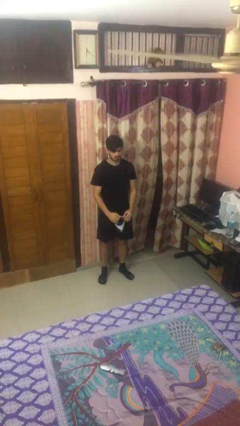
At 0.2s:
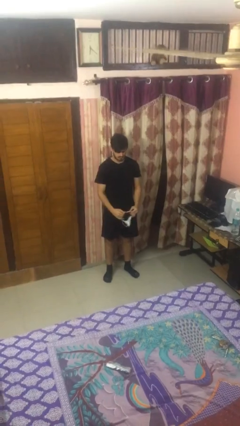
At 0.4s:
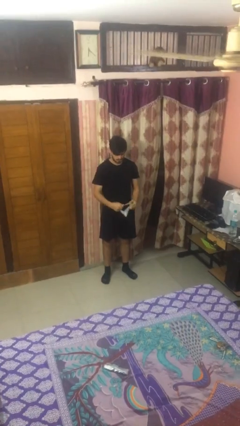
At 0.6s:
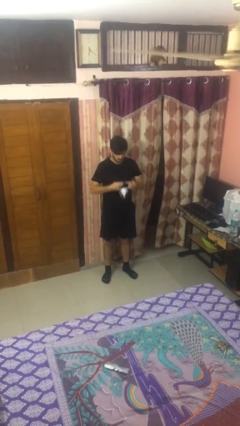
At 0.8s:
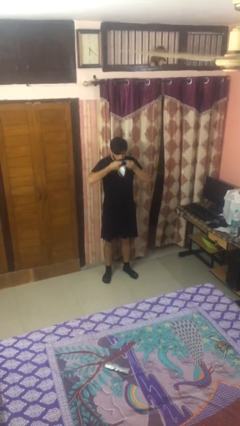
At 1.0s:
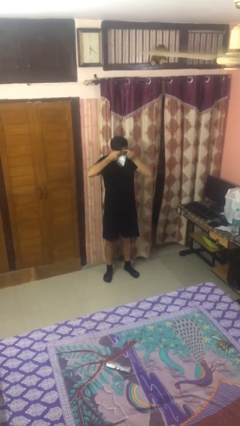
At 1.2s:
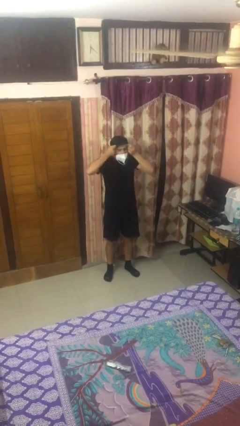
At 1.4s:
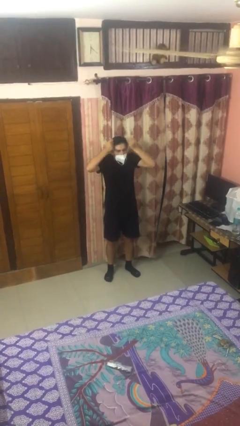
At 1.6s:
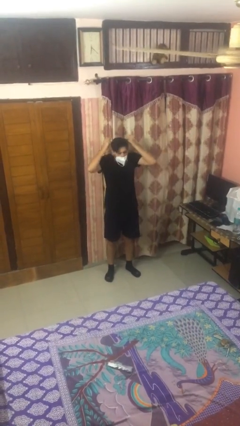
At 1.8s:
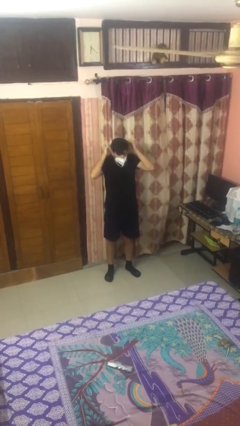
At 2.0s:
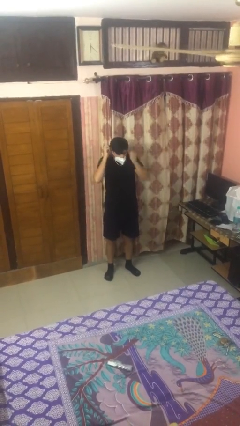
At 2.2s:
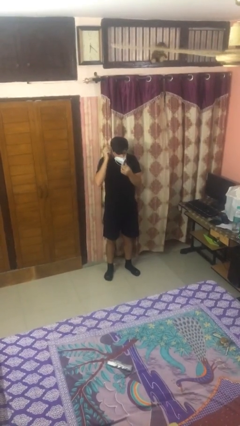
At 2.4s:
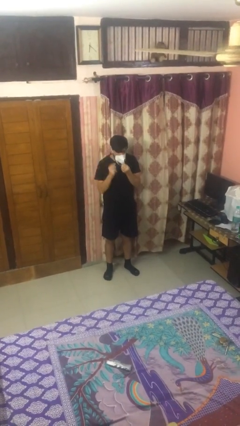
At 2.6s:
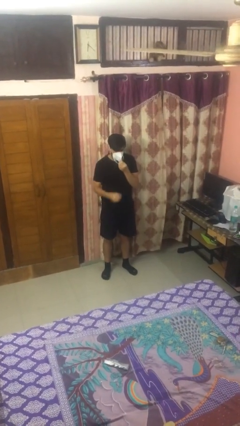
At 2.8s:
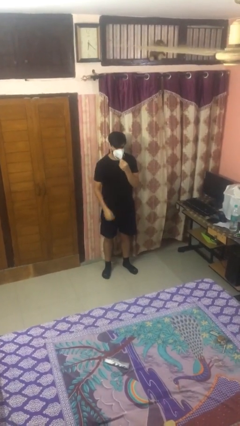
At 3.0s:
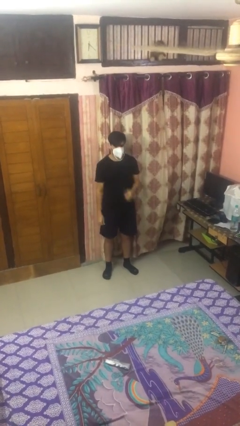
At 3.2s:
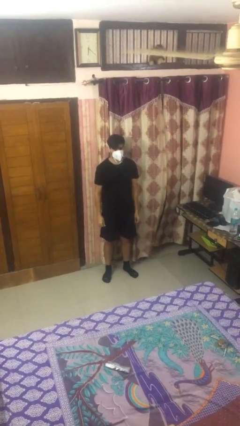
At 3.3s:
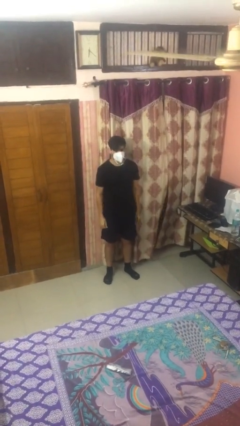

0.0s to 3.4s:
person puts on facemask

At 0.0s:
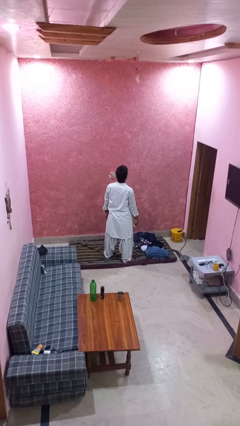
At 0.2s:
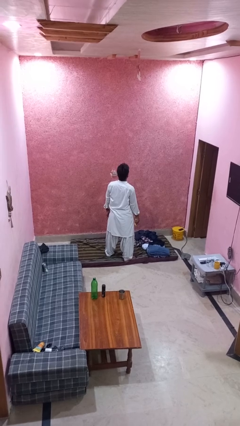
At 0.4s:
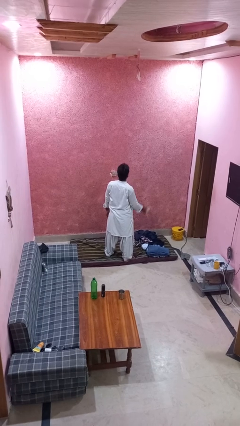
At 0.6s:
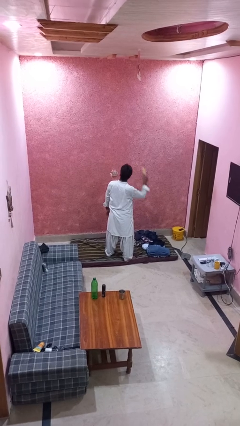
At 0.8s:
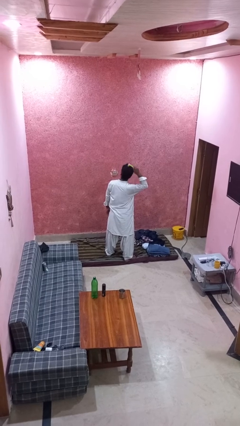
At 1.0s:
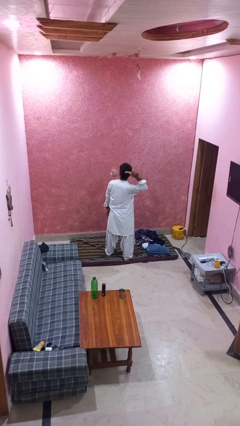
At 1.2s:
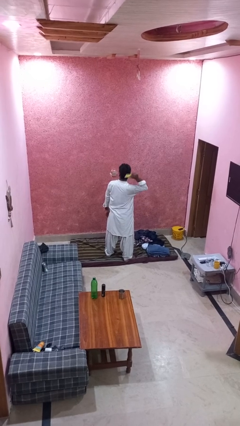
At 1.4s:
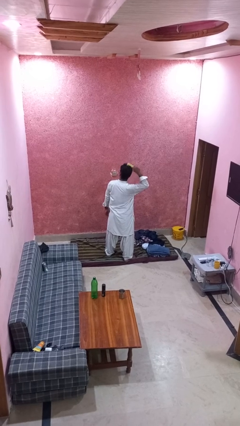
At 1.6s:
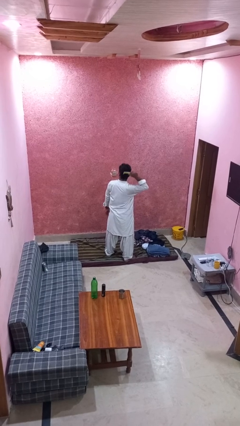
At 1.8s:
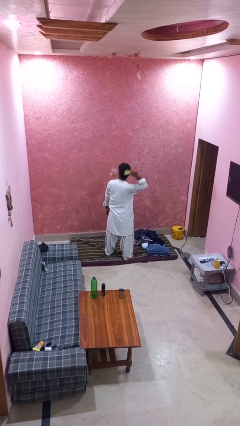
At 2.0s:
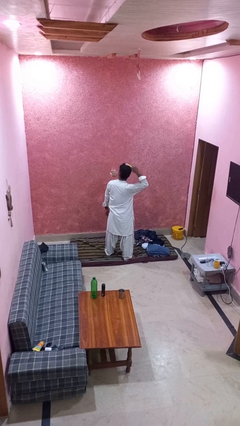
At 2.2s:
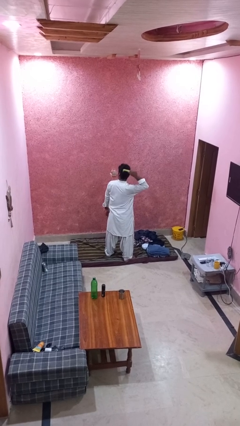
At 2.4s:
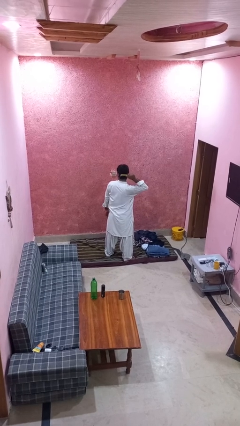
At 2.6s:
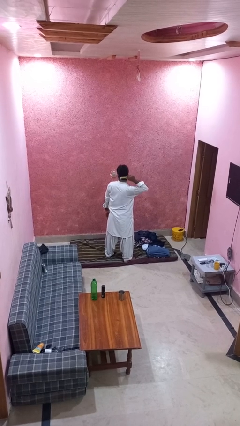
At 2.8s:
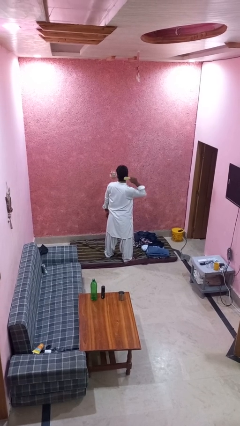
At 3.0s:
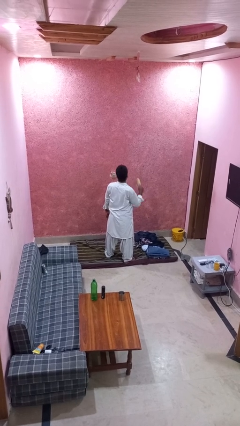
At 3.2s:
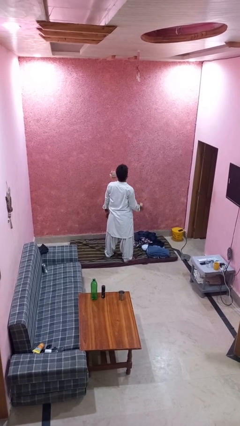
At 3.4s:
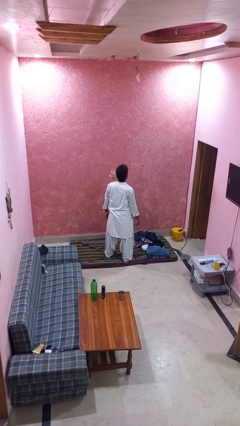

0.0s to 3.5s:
person brushes hair

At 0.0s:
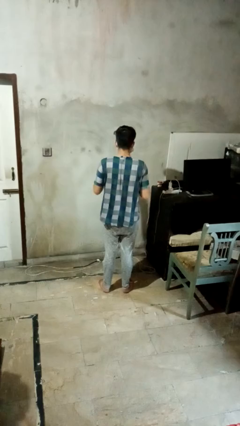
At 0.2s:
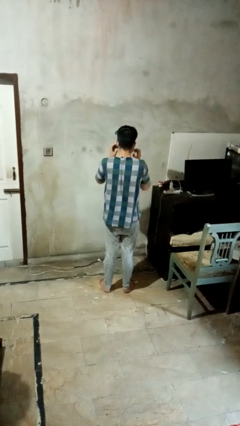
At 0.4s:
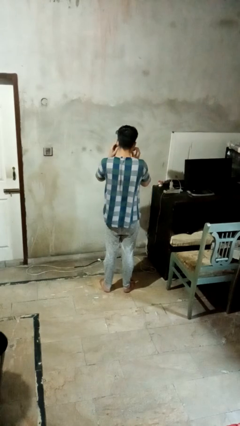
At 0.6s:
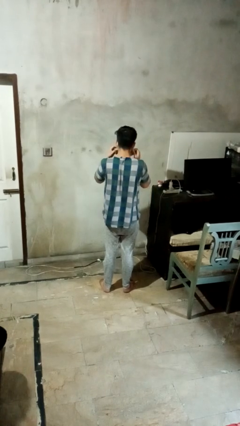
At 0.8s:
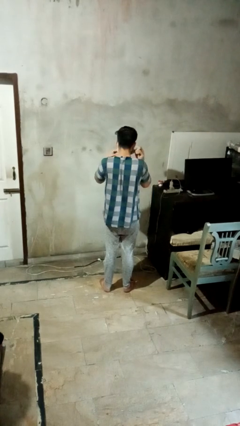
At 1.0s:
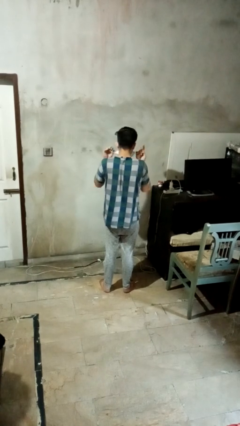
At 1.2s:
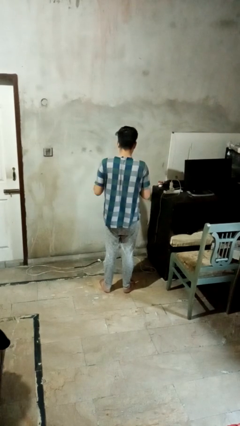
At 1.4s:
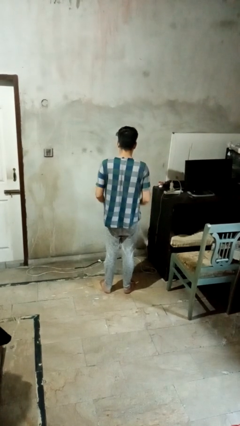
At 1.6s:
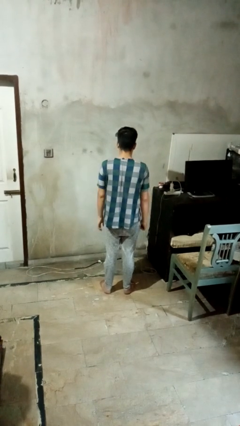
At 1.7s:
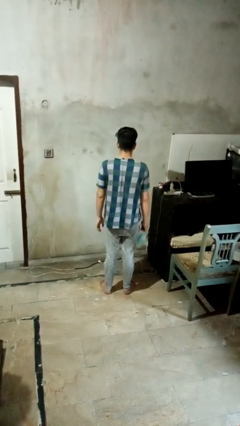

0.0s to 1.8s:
person takes off facemask

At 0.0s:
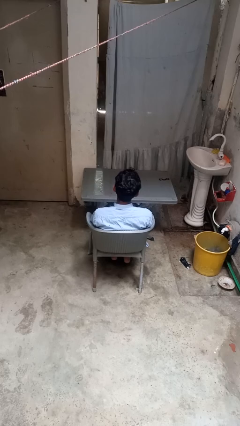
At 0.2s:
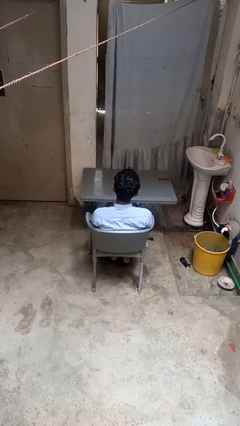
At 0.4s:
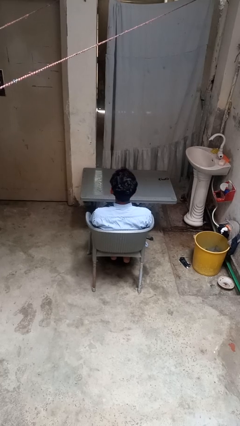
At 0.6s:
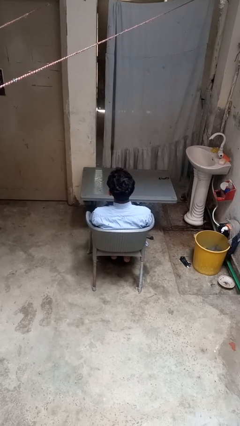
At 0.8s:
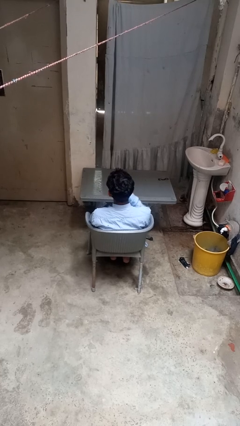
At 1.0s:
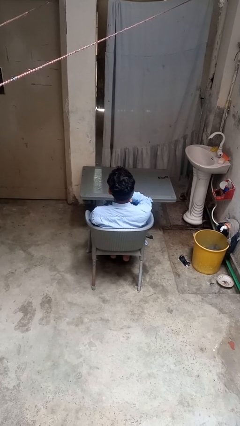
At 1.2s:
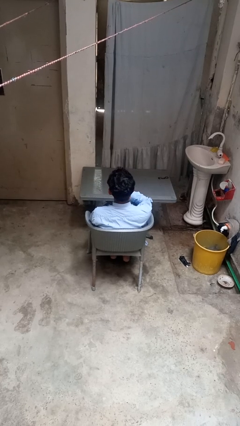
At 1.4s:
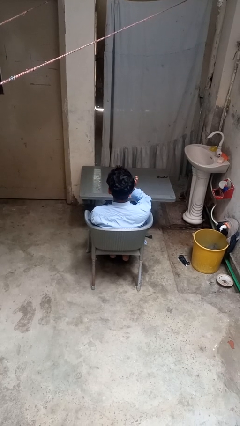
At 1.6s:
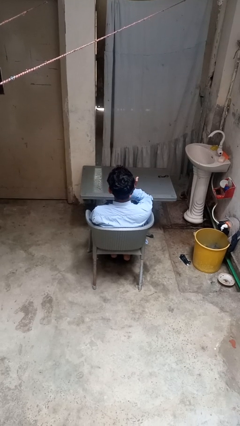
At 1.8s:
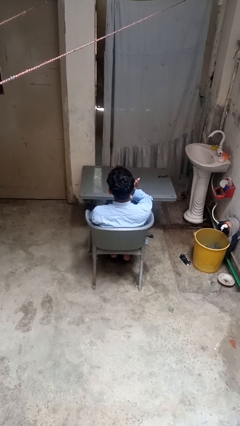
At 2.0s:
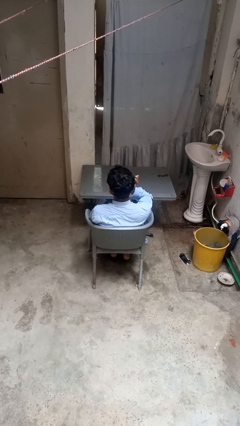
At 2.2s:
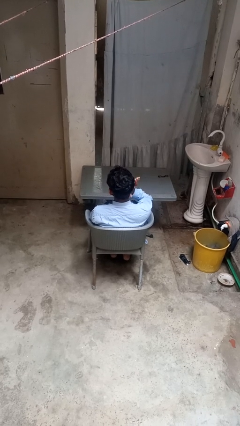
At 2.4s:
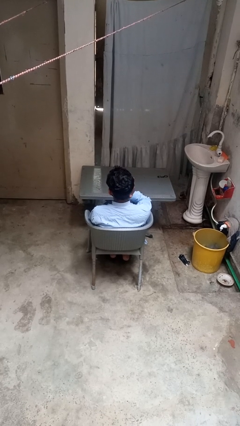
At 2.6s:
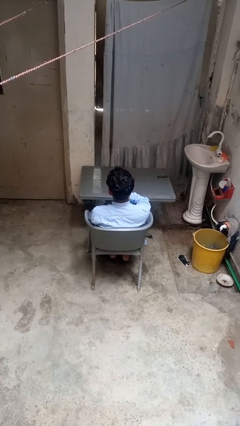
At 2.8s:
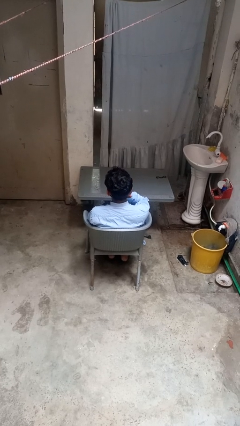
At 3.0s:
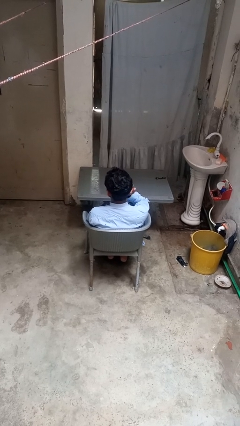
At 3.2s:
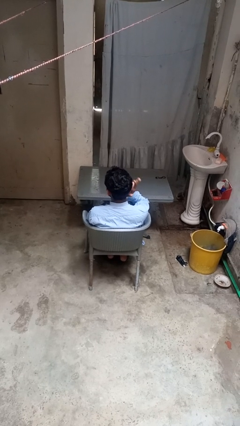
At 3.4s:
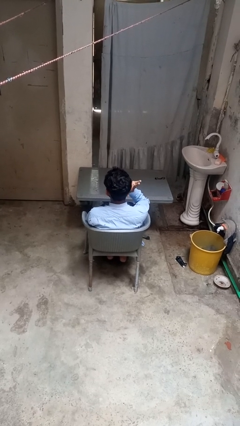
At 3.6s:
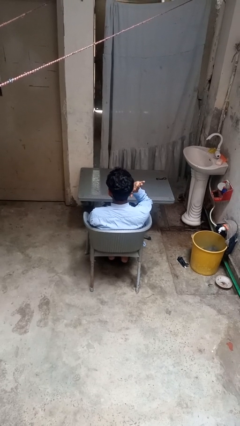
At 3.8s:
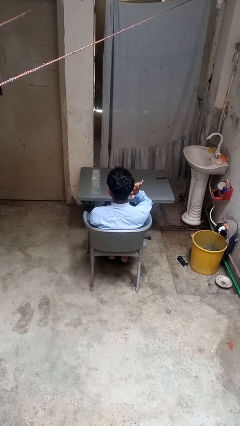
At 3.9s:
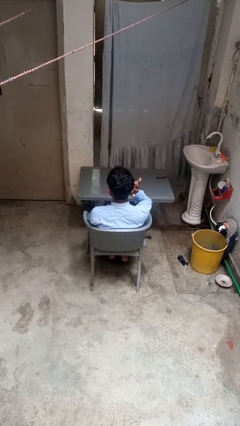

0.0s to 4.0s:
person puts fingers in ear

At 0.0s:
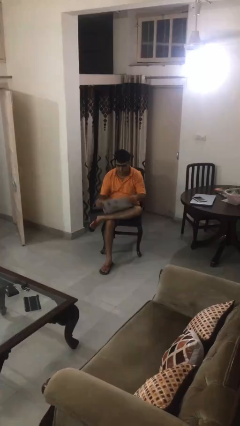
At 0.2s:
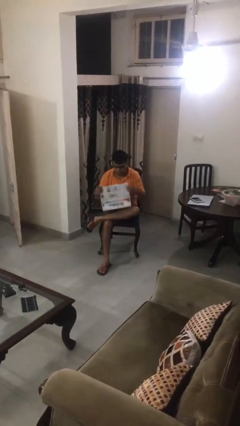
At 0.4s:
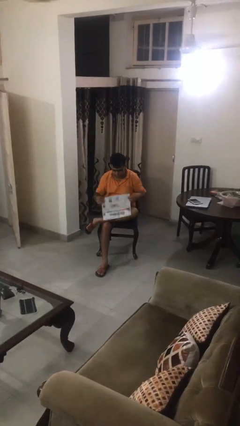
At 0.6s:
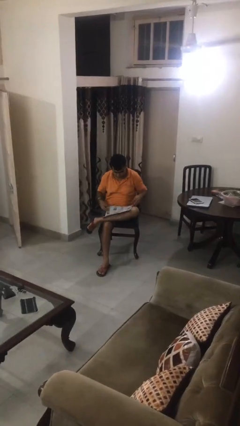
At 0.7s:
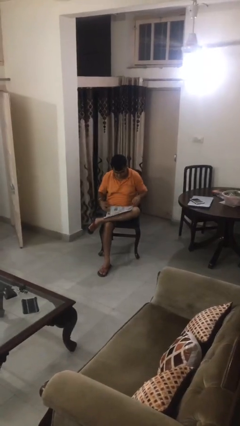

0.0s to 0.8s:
person reads newspaper

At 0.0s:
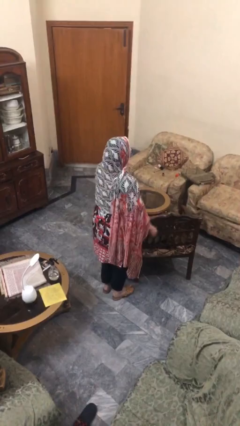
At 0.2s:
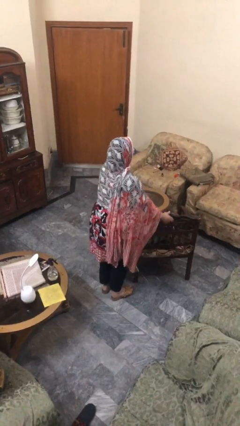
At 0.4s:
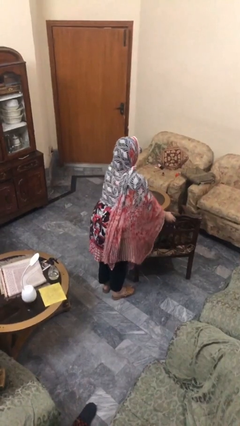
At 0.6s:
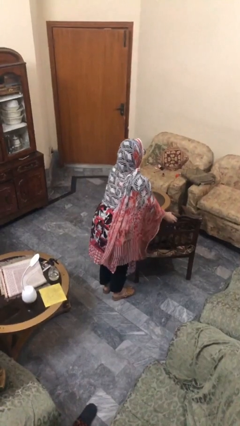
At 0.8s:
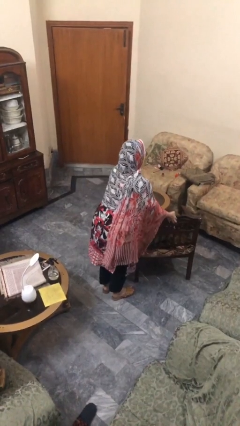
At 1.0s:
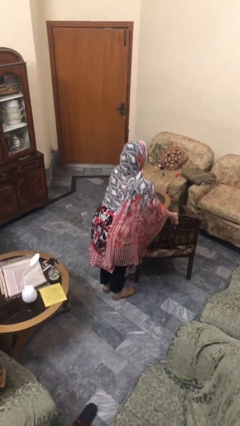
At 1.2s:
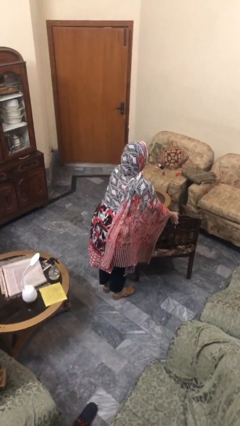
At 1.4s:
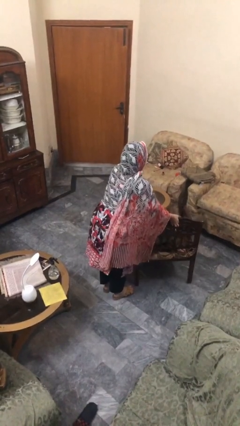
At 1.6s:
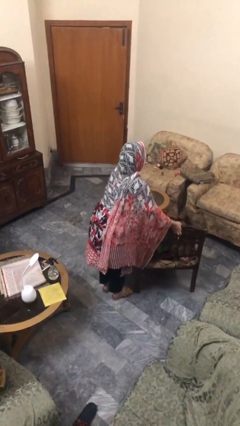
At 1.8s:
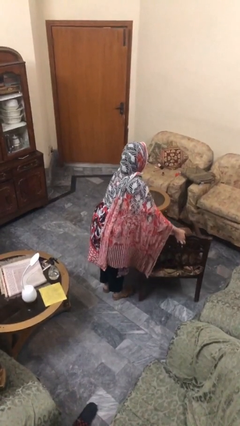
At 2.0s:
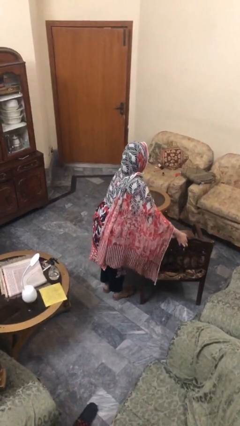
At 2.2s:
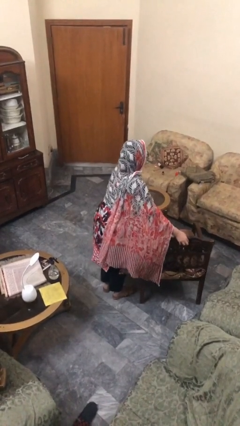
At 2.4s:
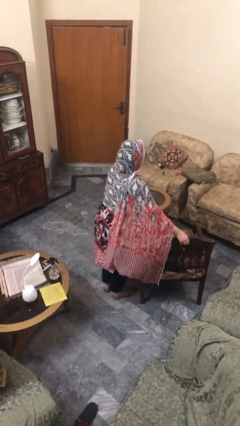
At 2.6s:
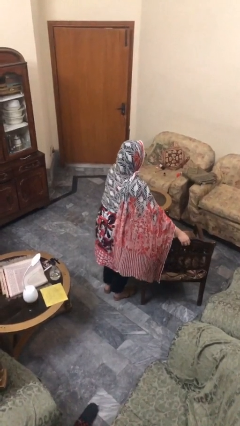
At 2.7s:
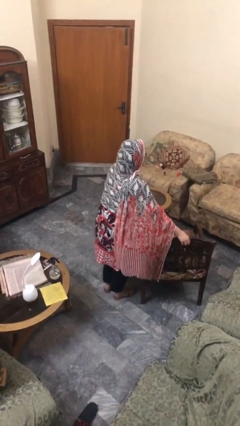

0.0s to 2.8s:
person pulls out chair

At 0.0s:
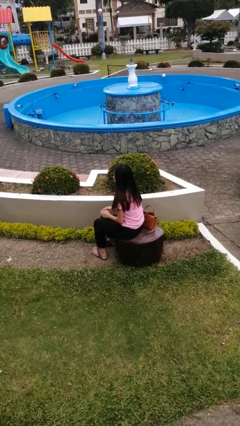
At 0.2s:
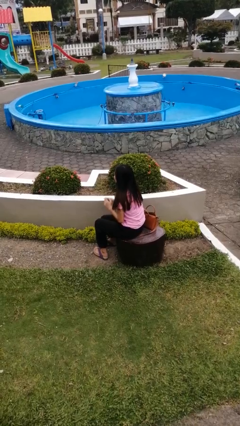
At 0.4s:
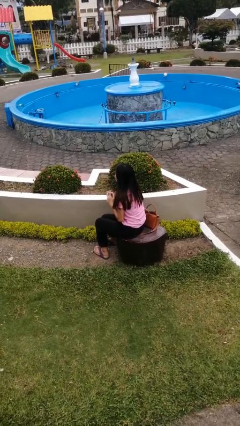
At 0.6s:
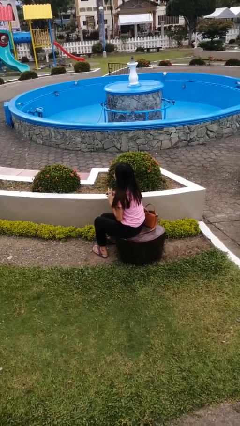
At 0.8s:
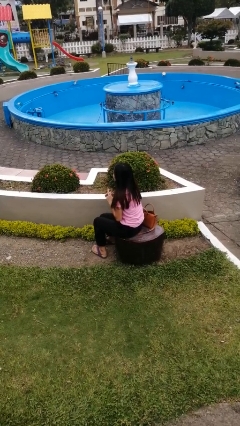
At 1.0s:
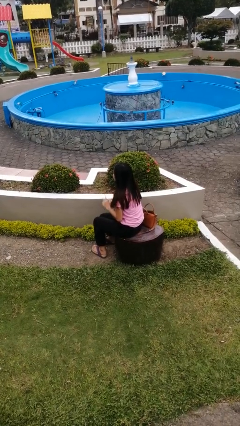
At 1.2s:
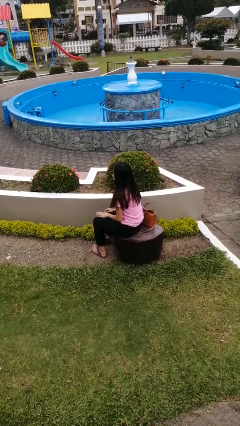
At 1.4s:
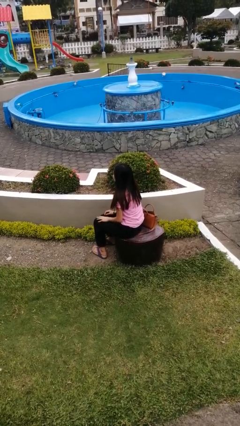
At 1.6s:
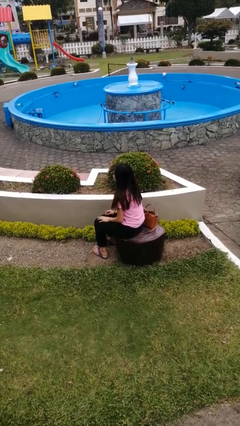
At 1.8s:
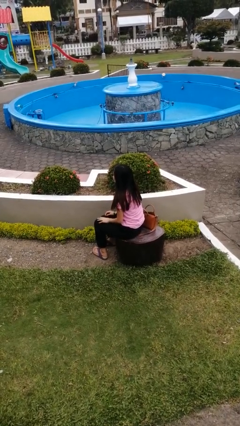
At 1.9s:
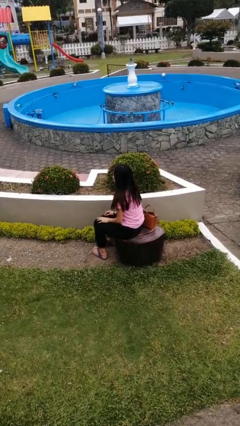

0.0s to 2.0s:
person puts on ring
